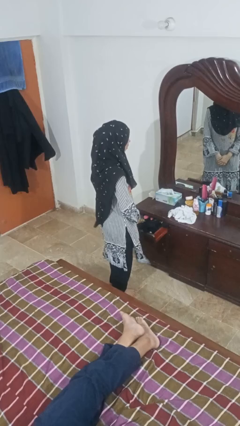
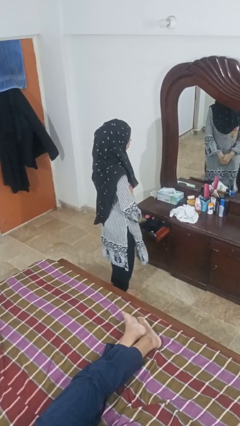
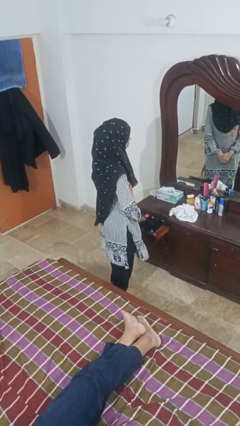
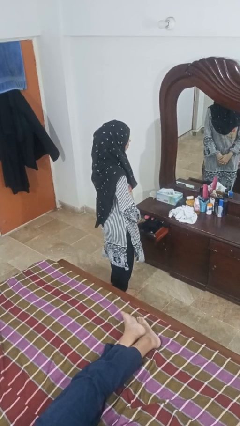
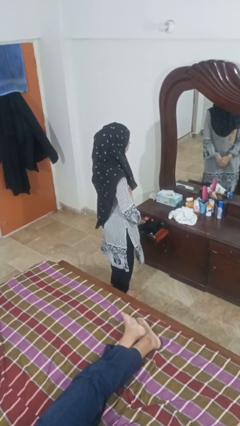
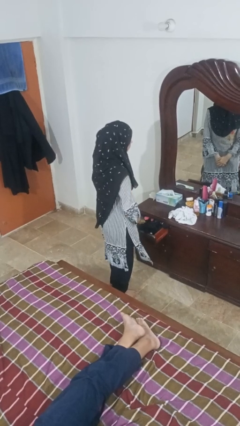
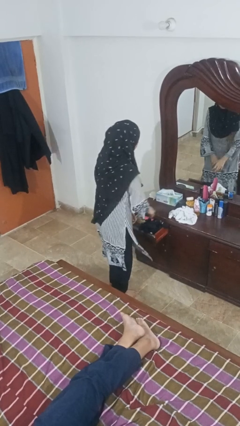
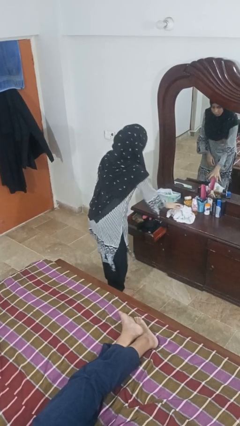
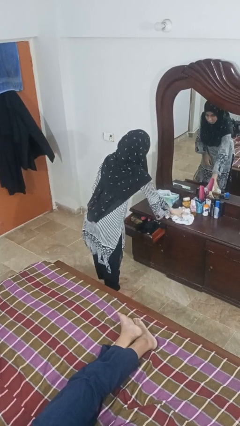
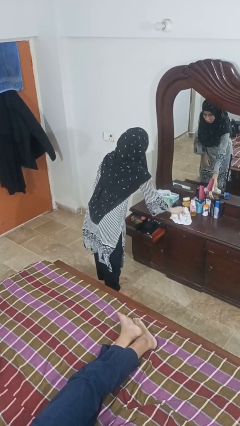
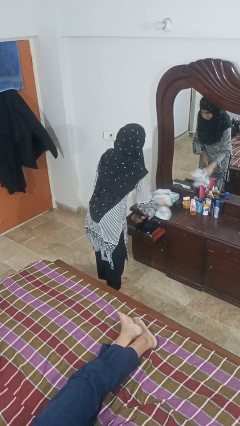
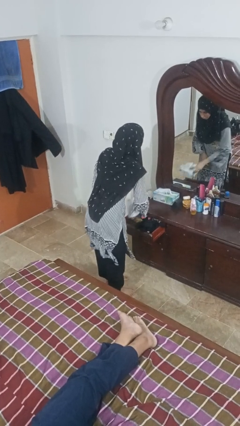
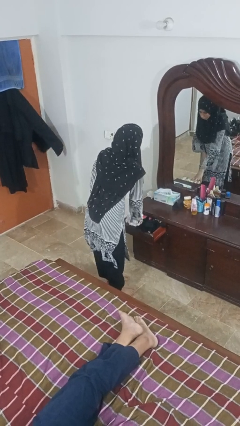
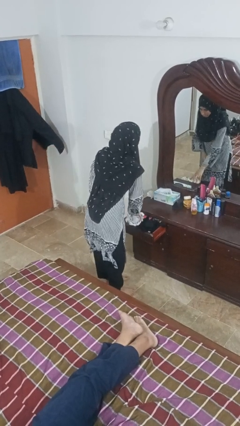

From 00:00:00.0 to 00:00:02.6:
person puts clothes into dresser

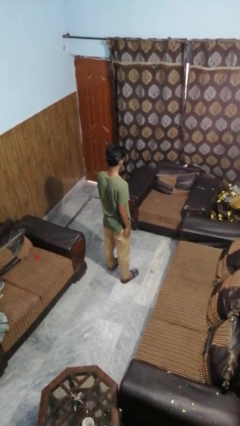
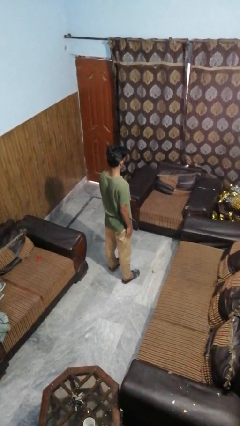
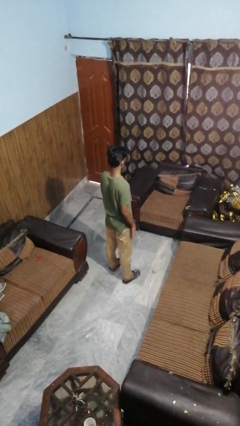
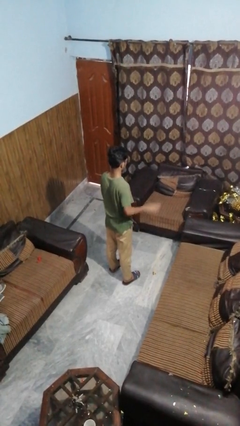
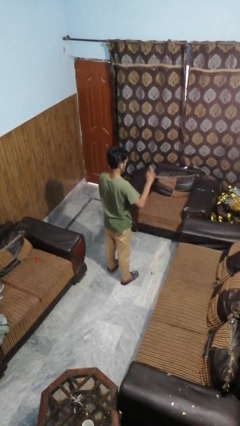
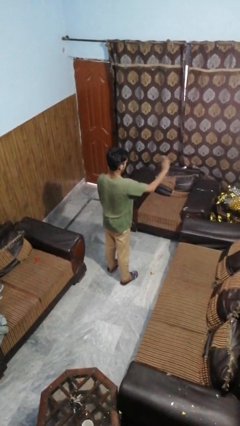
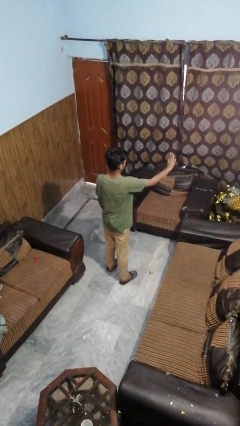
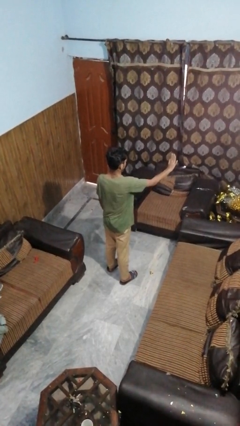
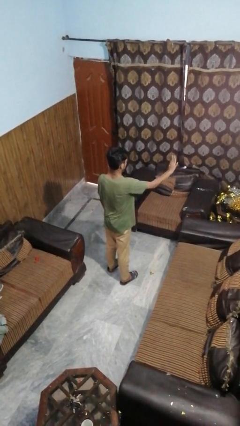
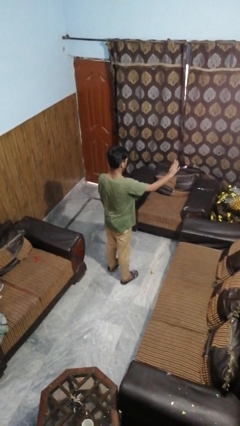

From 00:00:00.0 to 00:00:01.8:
person gestures stop

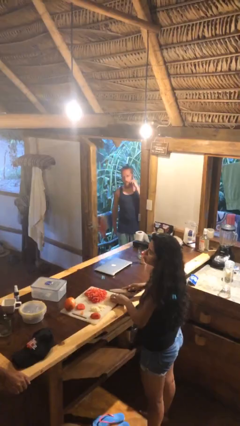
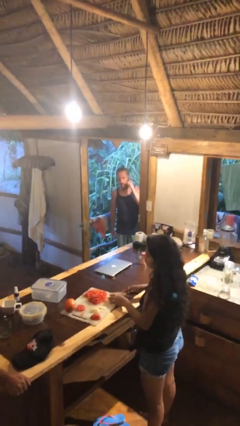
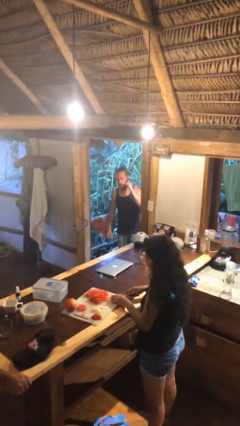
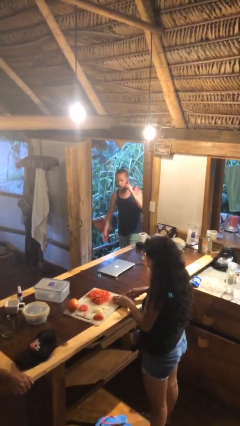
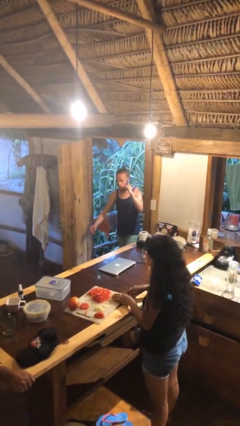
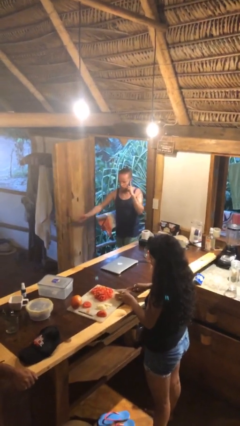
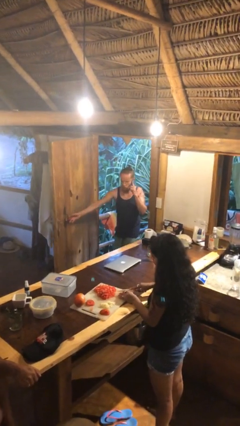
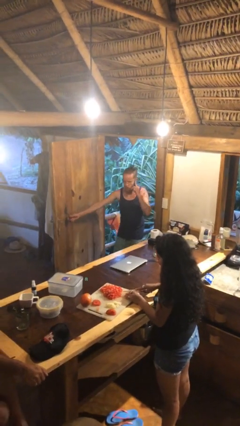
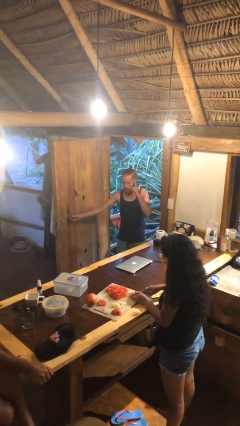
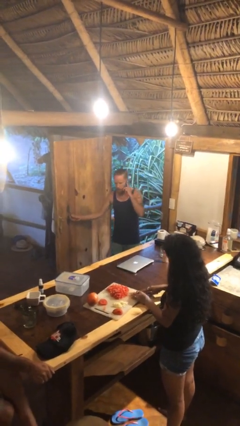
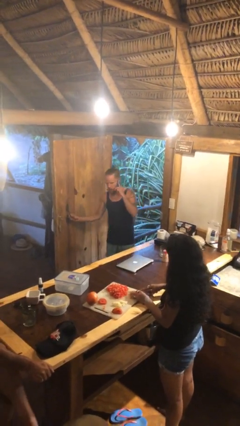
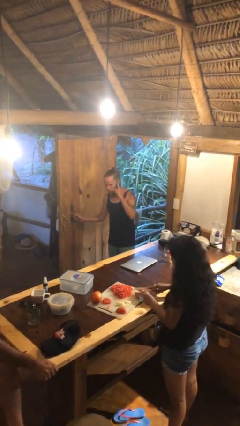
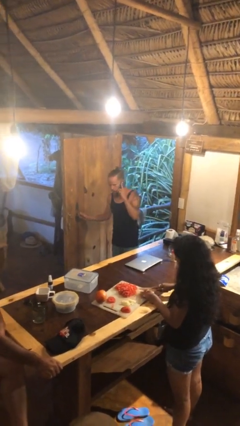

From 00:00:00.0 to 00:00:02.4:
person enters scene through structure

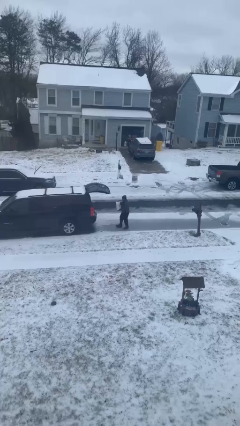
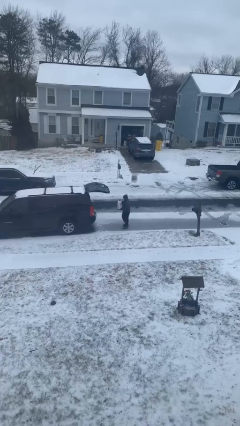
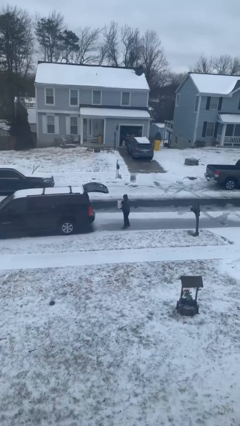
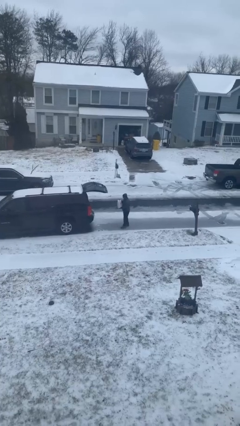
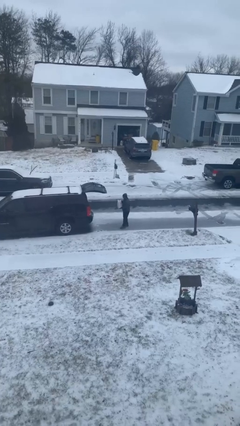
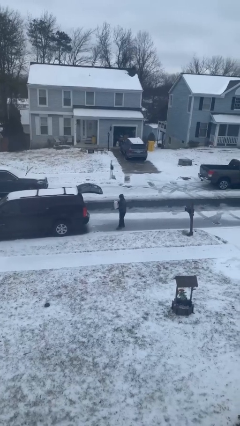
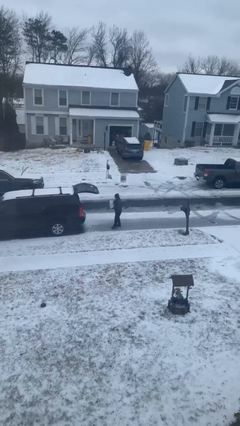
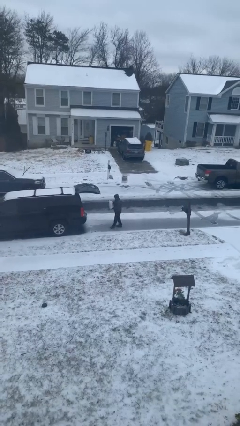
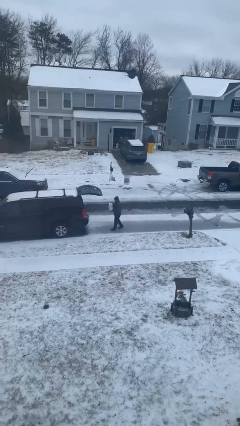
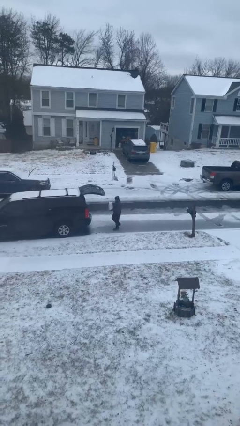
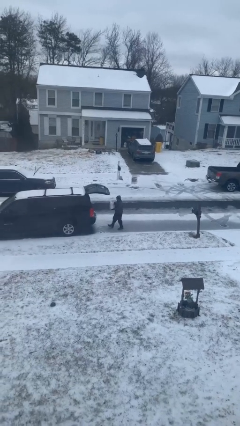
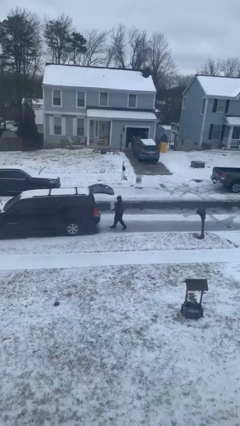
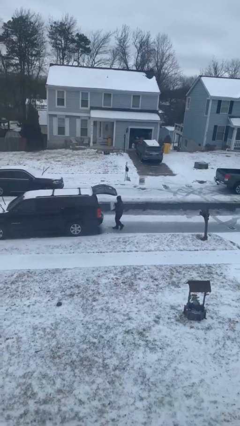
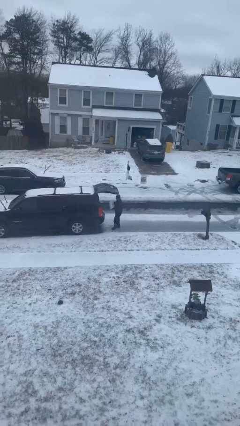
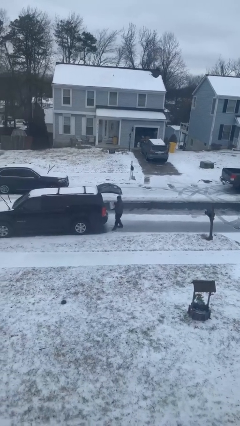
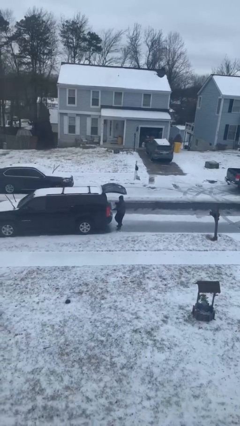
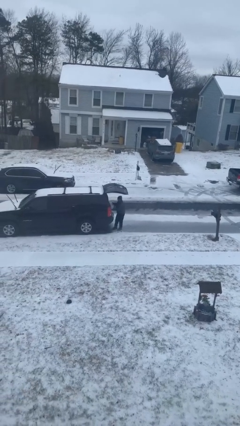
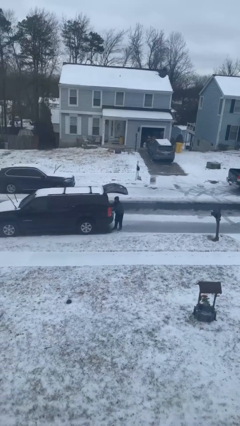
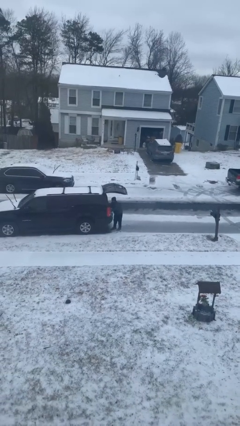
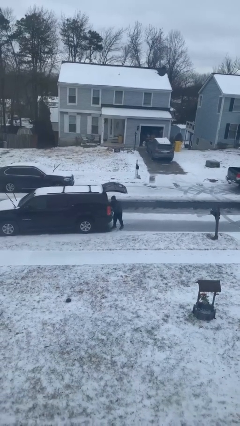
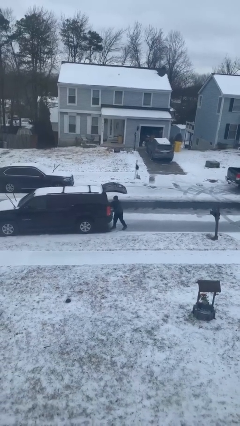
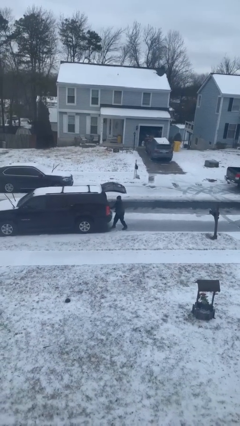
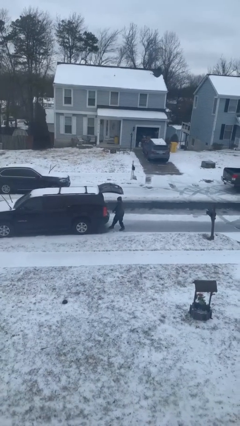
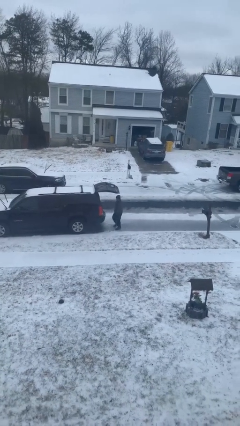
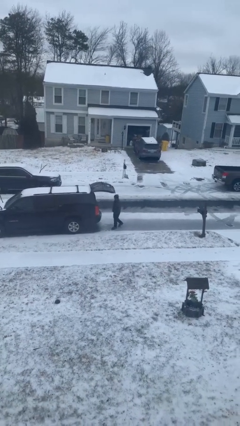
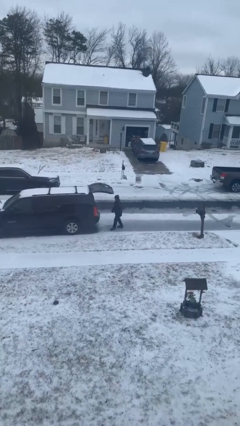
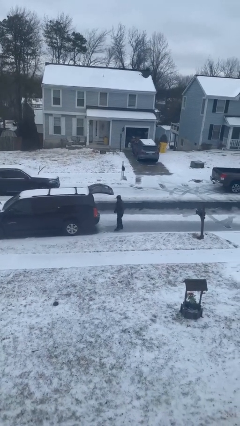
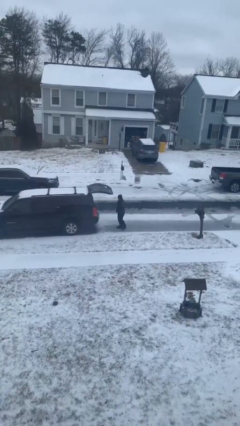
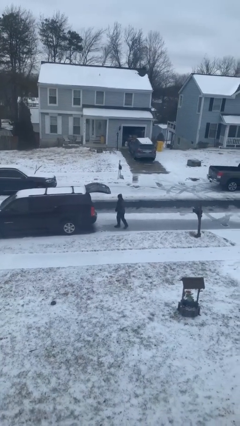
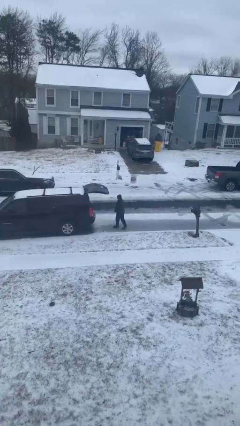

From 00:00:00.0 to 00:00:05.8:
person loads car

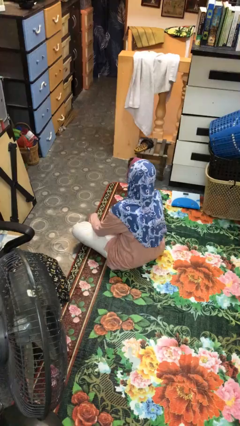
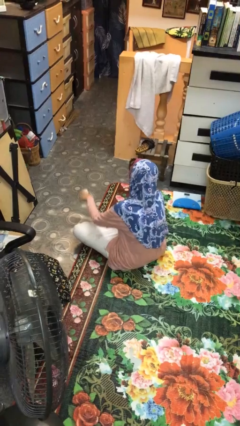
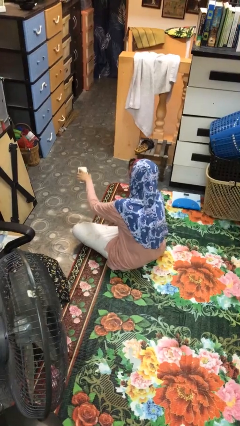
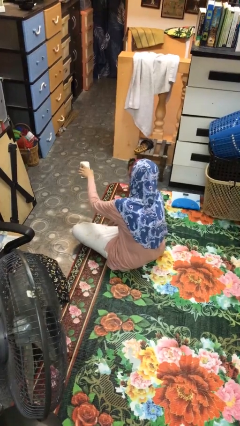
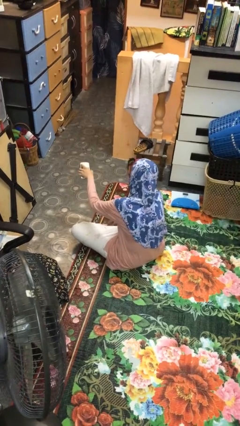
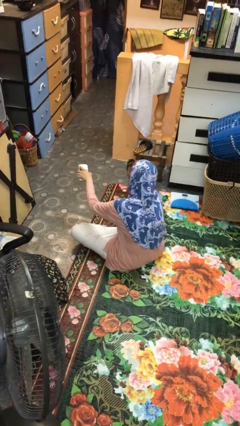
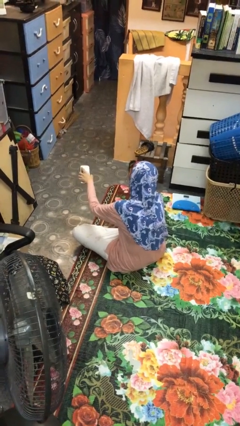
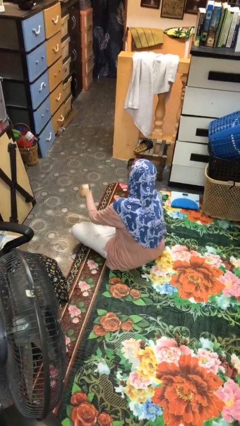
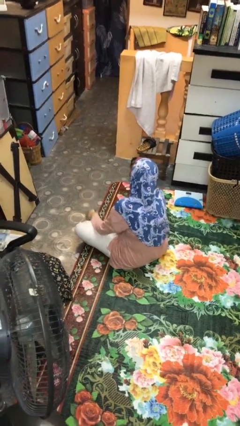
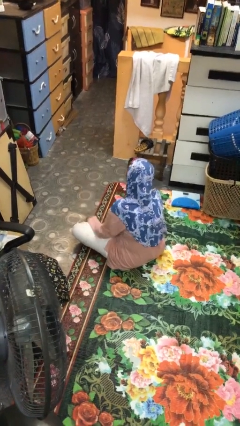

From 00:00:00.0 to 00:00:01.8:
person uses television remote

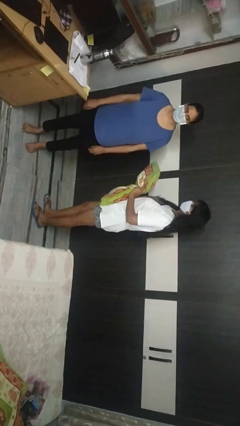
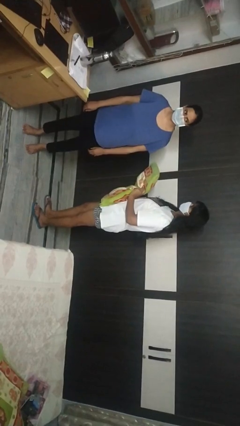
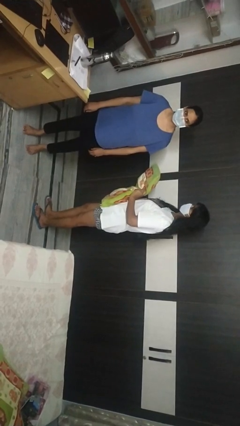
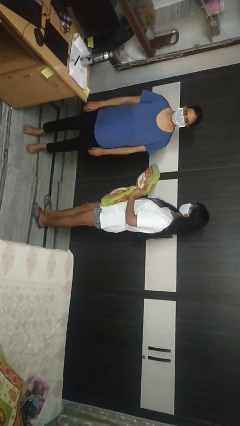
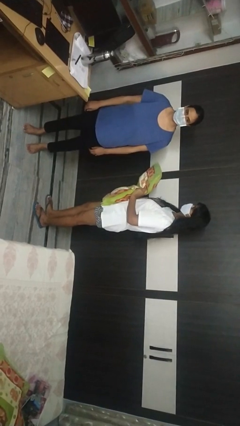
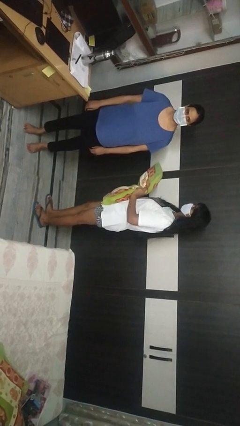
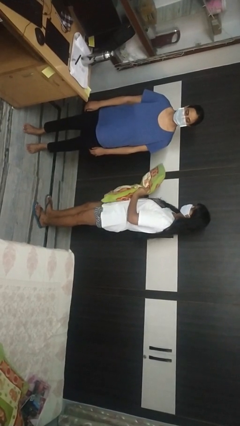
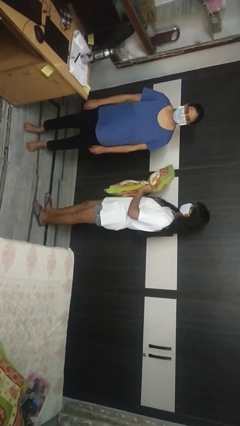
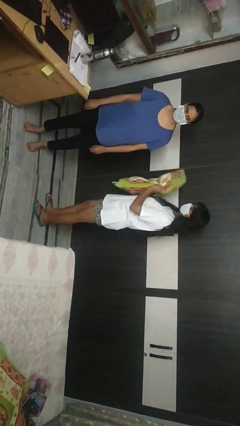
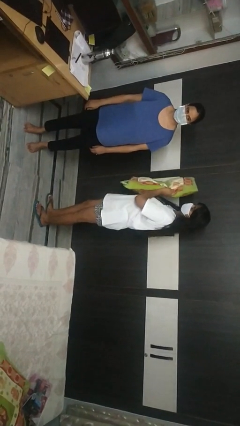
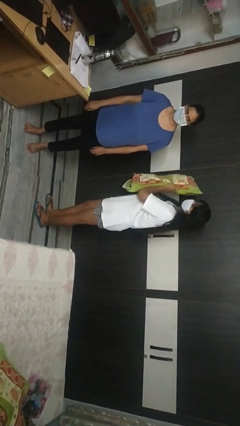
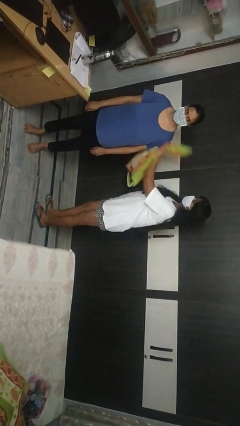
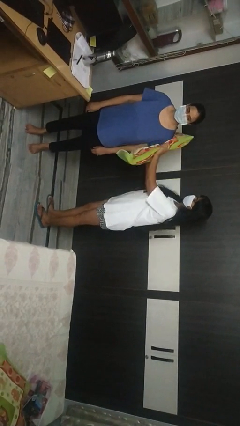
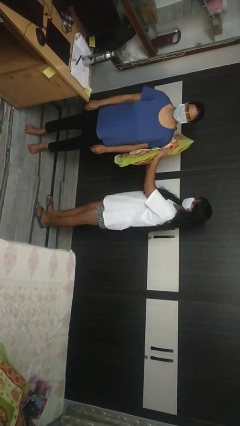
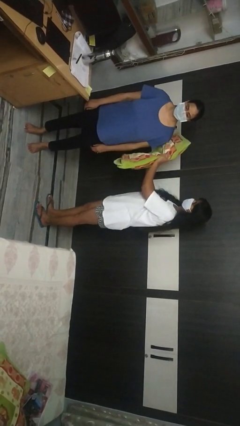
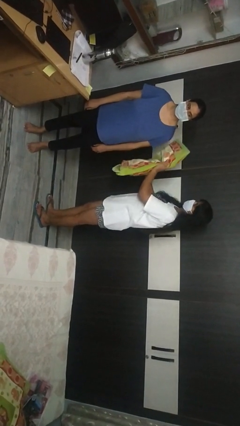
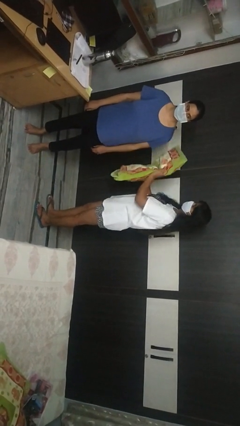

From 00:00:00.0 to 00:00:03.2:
person hits person with pillow
